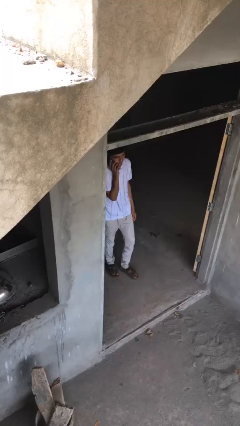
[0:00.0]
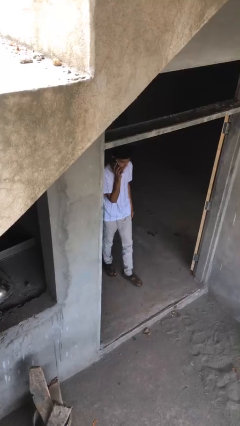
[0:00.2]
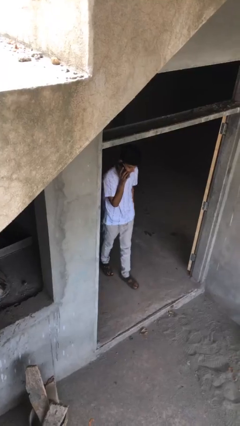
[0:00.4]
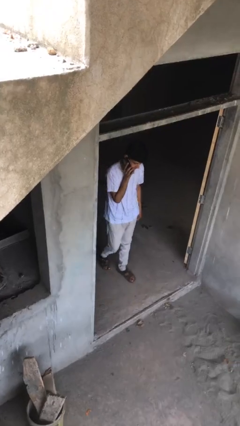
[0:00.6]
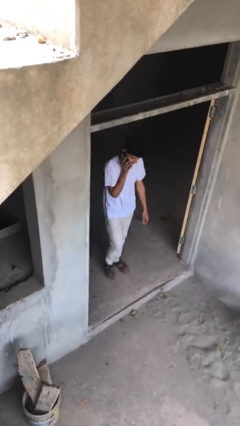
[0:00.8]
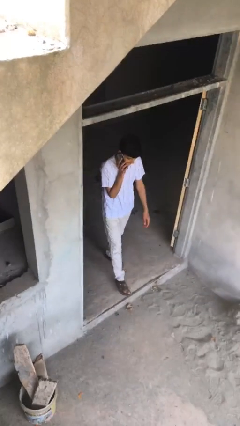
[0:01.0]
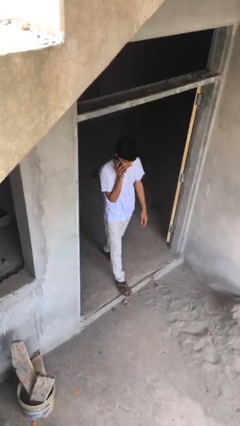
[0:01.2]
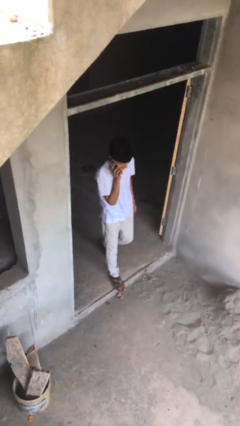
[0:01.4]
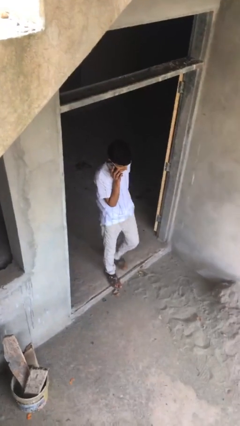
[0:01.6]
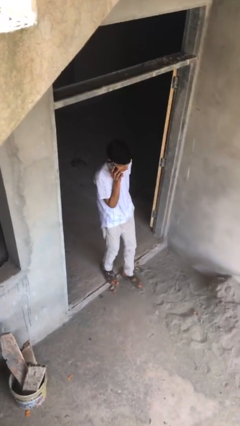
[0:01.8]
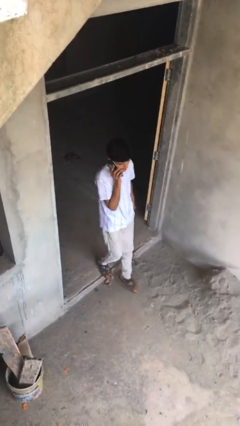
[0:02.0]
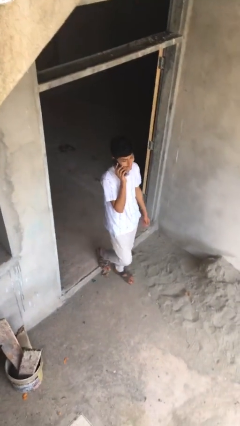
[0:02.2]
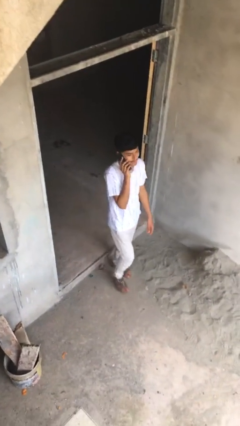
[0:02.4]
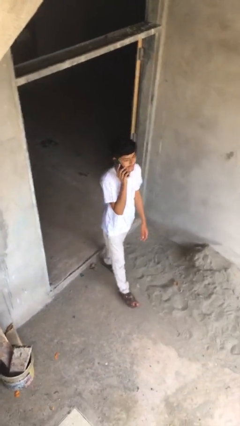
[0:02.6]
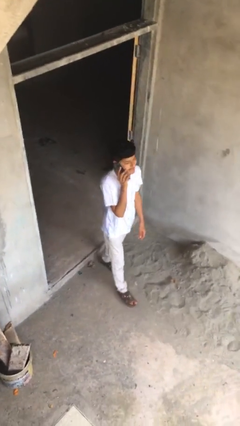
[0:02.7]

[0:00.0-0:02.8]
person enters scene through structure

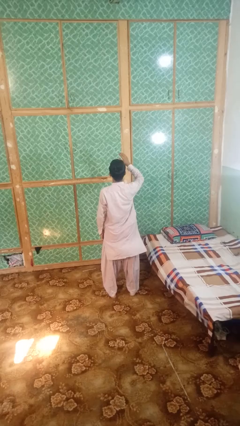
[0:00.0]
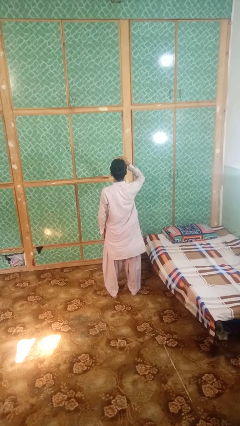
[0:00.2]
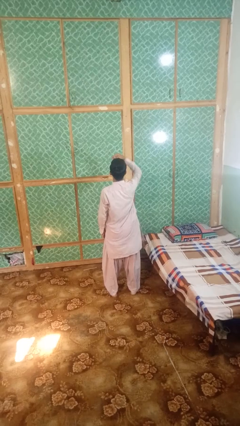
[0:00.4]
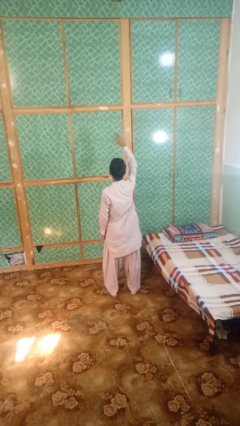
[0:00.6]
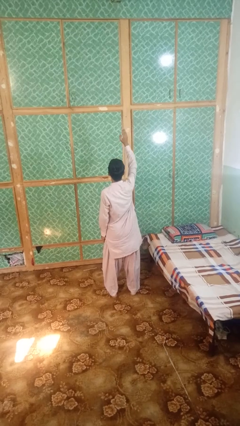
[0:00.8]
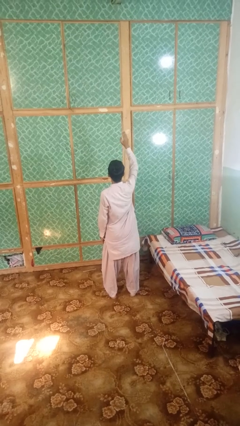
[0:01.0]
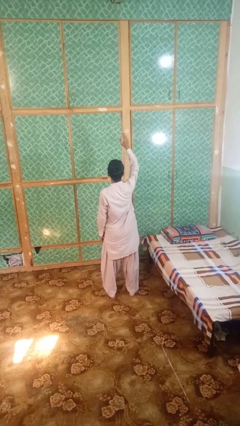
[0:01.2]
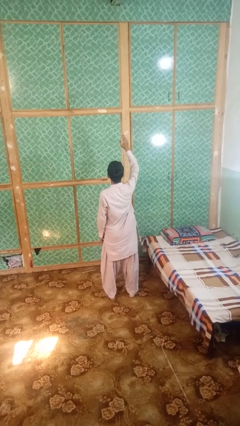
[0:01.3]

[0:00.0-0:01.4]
person gestures swipe up

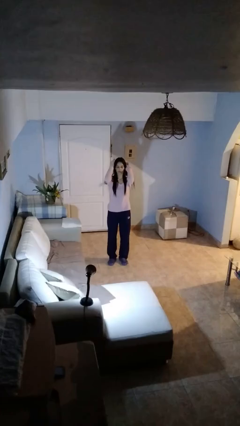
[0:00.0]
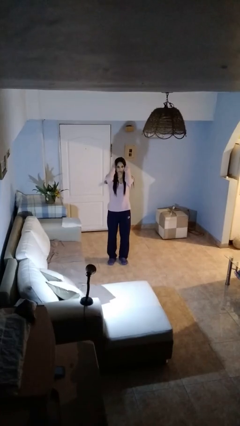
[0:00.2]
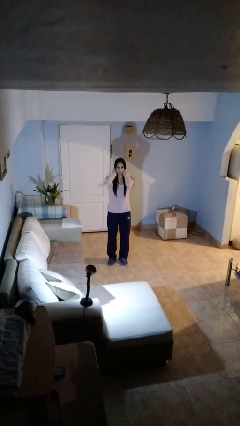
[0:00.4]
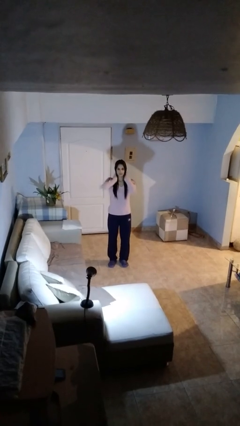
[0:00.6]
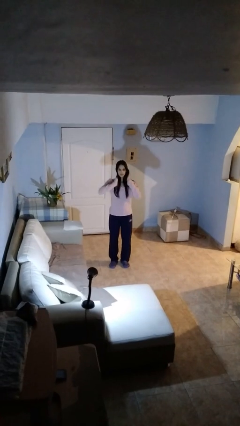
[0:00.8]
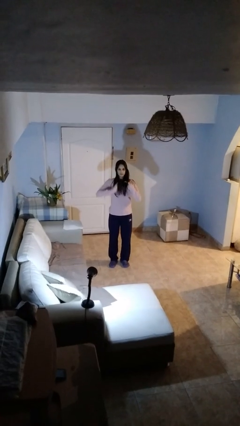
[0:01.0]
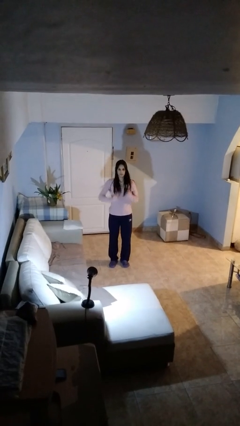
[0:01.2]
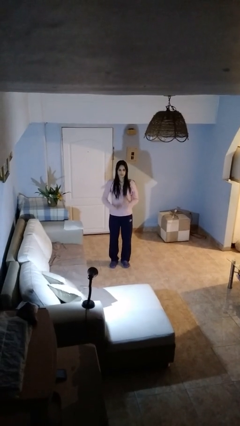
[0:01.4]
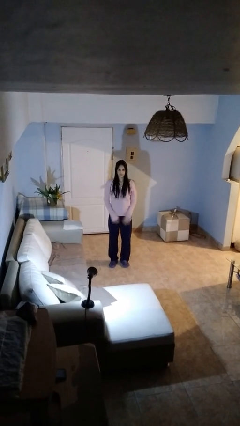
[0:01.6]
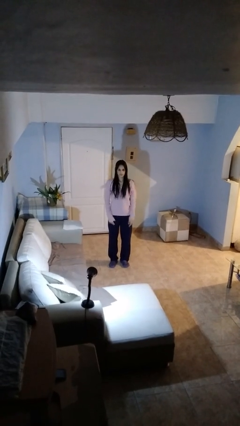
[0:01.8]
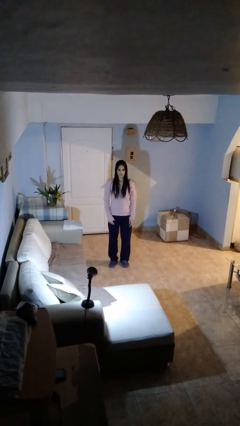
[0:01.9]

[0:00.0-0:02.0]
person strokes hair

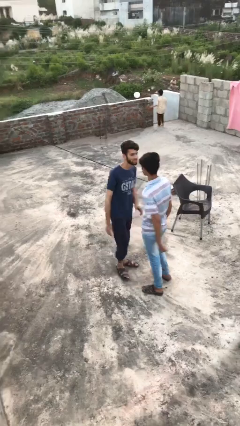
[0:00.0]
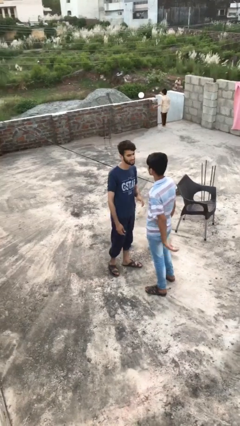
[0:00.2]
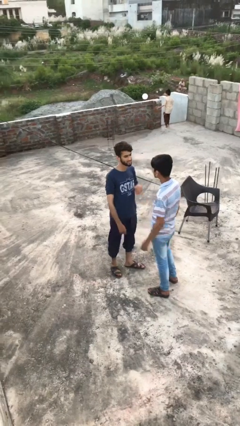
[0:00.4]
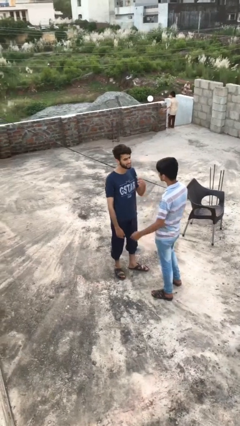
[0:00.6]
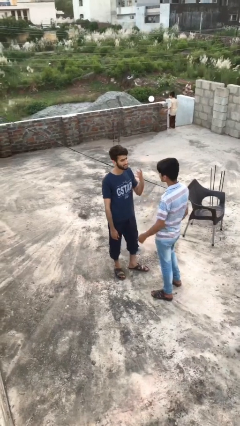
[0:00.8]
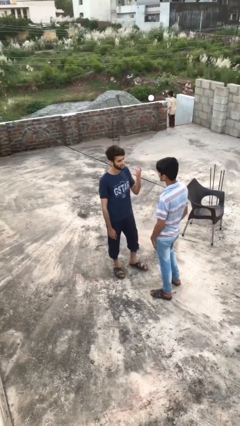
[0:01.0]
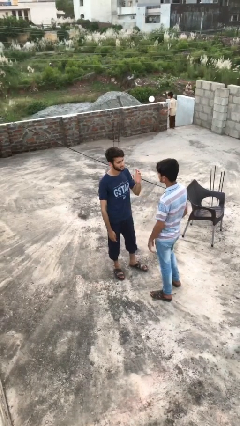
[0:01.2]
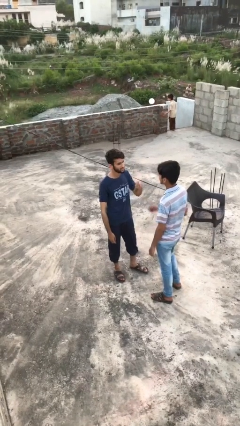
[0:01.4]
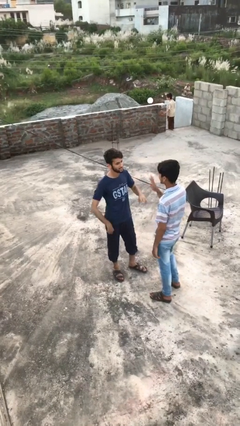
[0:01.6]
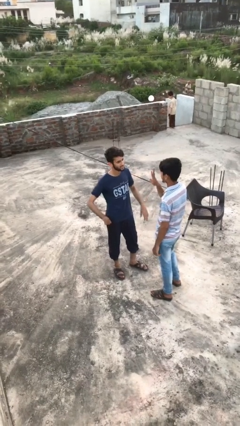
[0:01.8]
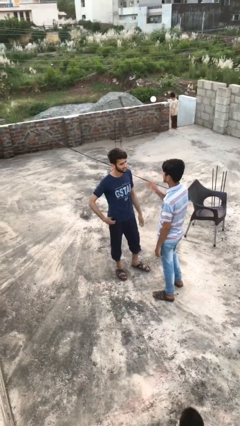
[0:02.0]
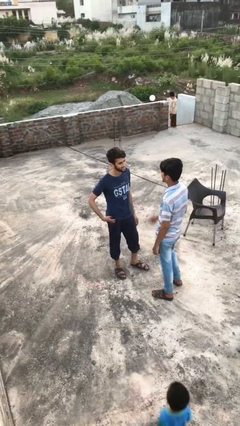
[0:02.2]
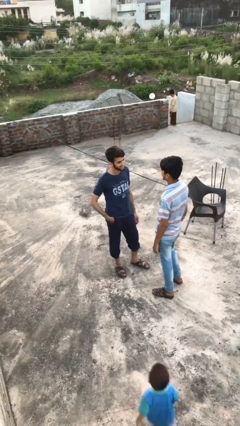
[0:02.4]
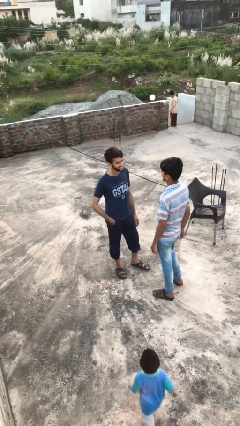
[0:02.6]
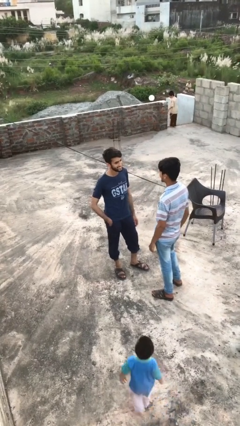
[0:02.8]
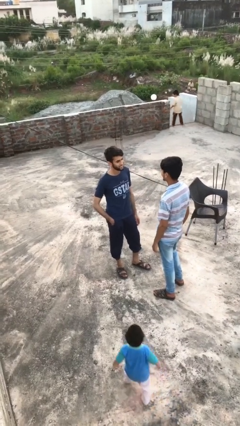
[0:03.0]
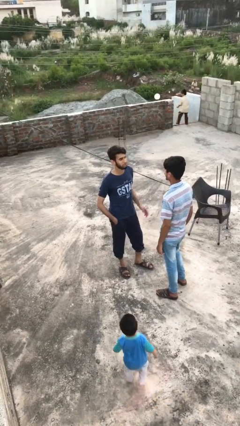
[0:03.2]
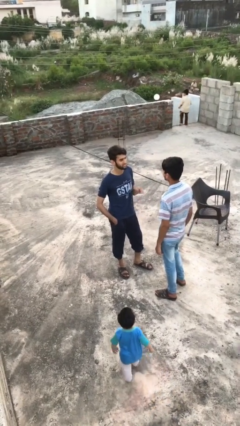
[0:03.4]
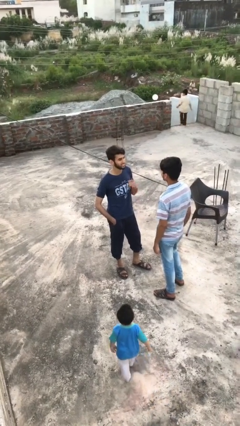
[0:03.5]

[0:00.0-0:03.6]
person talks to person

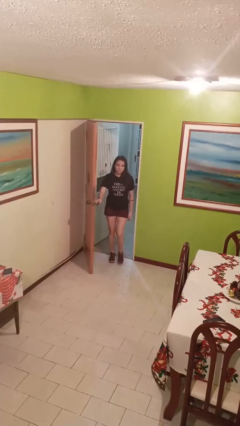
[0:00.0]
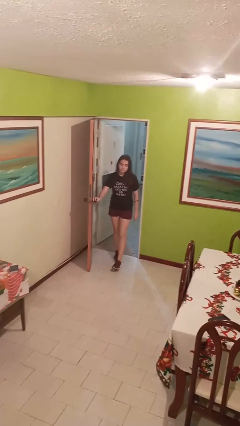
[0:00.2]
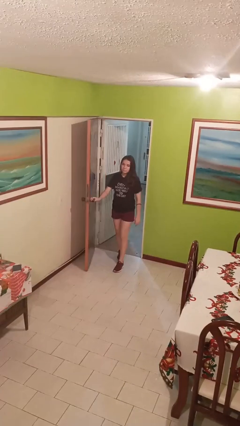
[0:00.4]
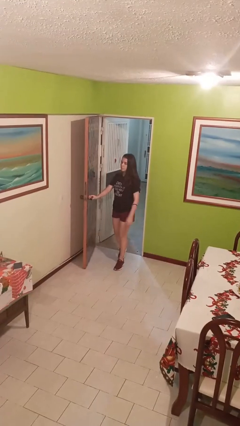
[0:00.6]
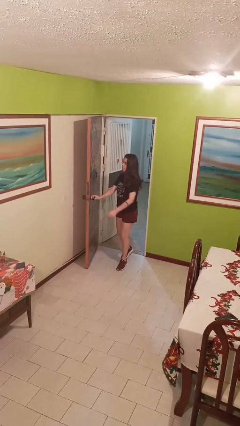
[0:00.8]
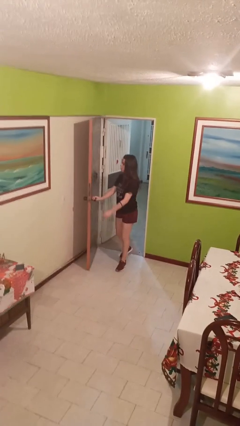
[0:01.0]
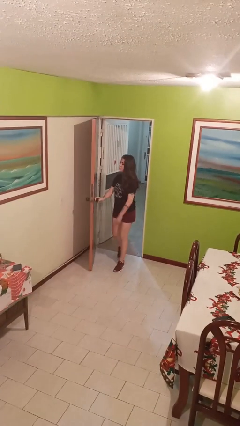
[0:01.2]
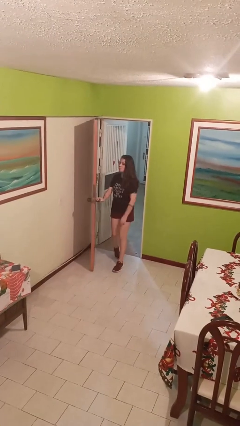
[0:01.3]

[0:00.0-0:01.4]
person opens facility door

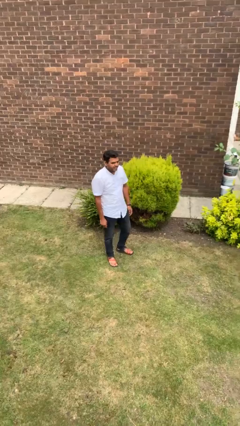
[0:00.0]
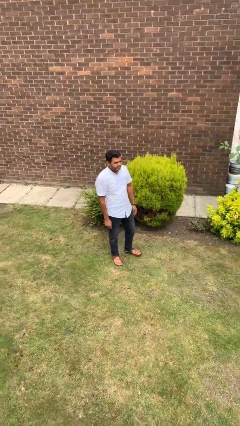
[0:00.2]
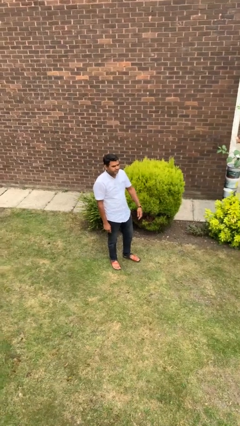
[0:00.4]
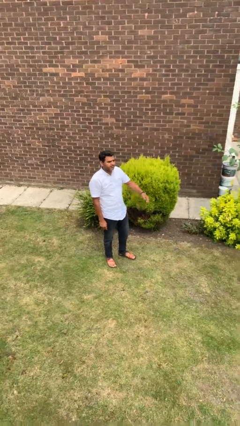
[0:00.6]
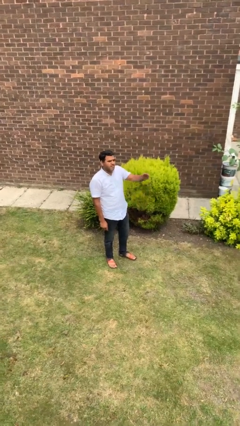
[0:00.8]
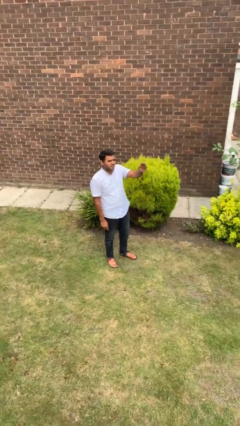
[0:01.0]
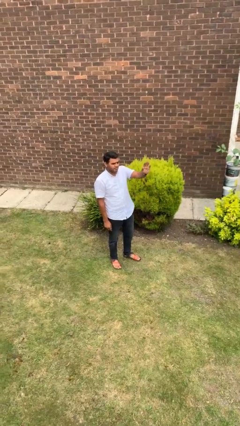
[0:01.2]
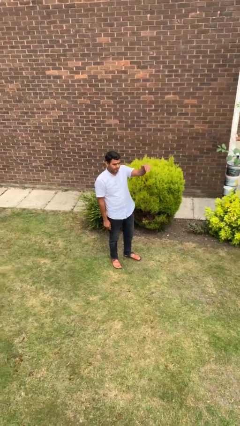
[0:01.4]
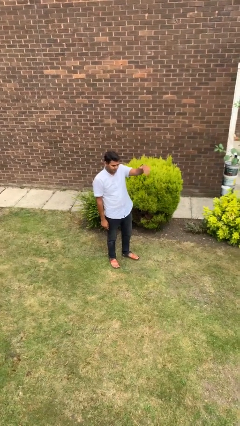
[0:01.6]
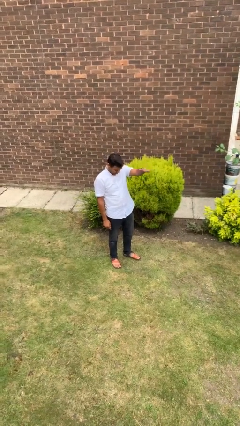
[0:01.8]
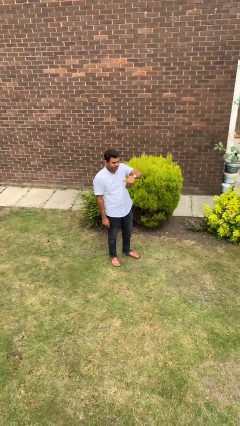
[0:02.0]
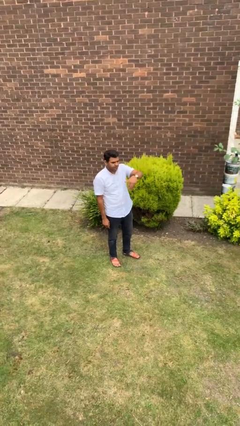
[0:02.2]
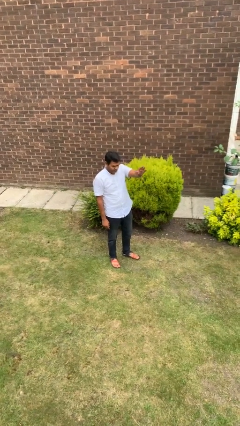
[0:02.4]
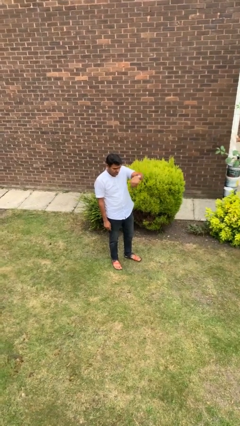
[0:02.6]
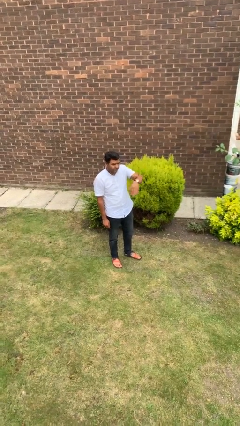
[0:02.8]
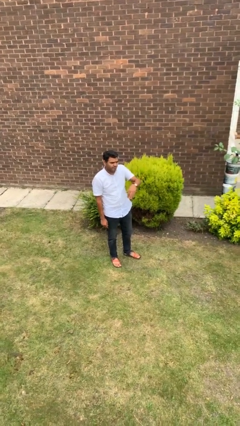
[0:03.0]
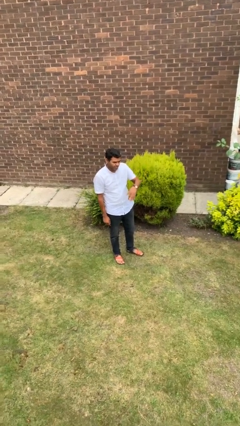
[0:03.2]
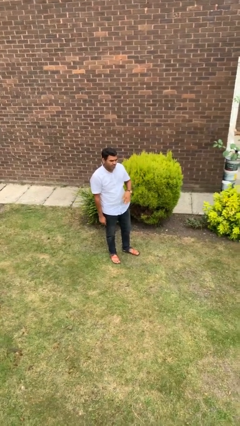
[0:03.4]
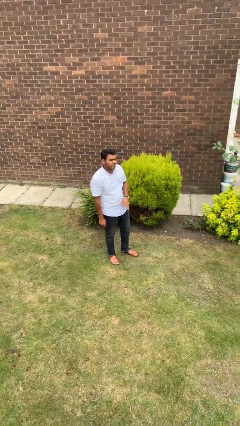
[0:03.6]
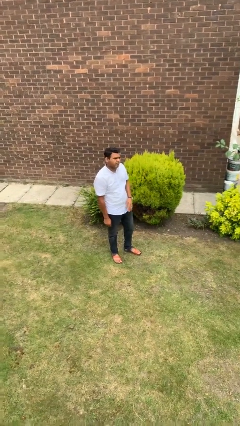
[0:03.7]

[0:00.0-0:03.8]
person gestures come here

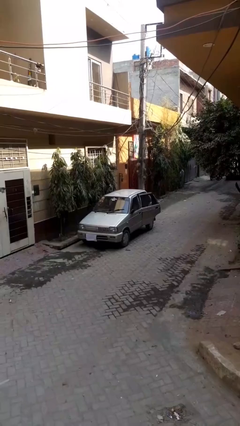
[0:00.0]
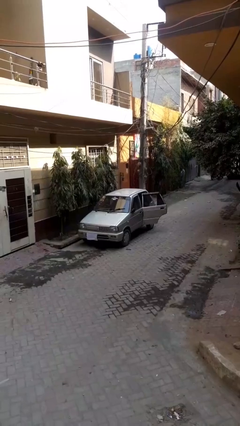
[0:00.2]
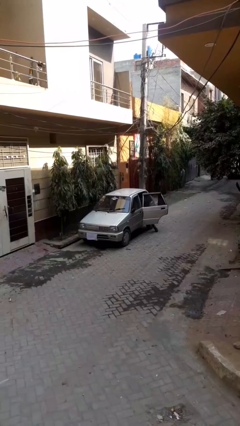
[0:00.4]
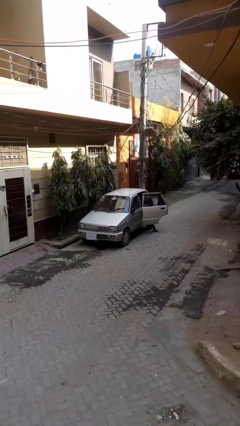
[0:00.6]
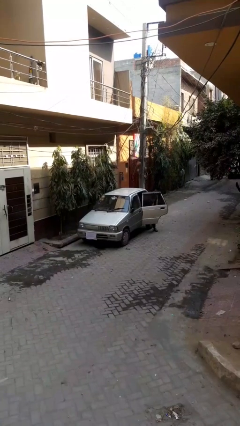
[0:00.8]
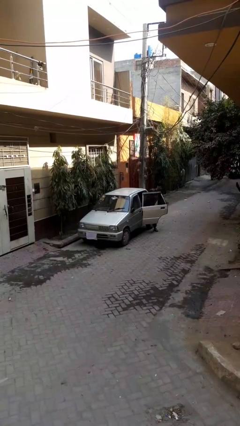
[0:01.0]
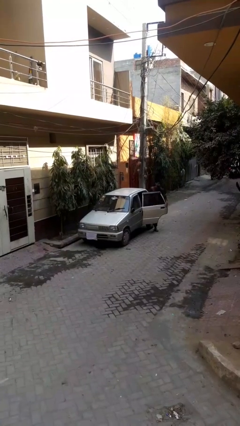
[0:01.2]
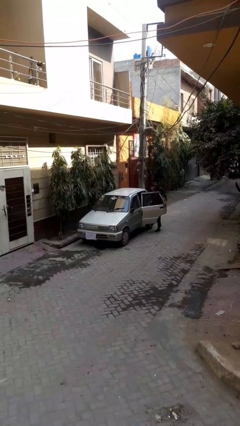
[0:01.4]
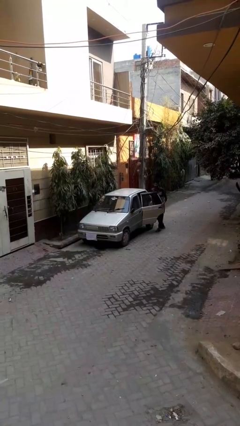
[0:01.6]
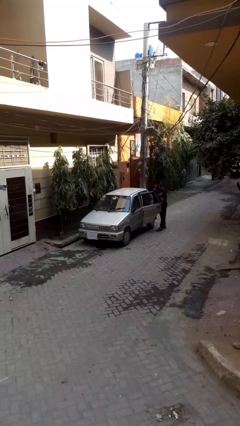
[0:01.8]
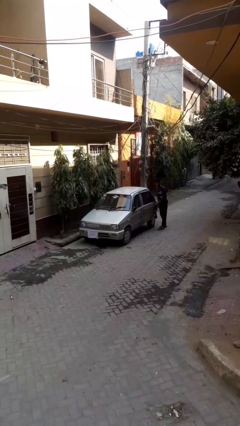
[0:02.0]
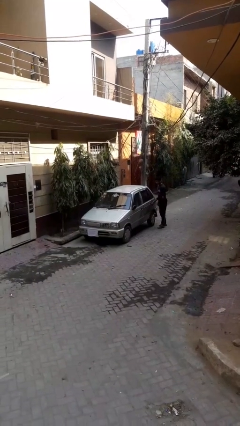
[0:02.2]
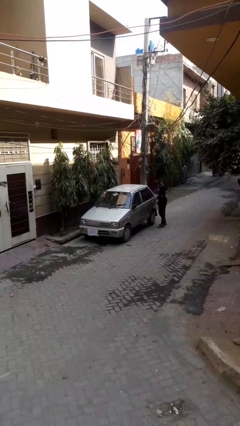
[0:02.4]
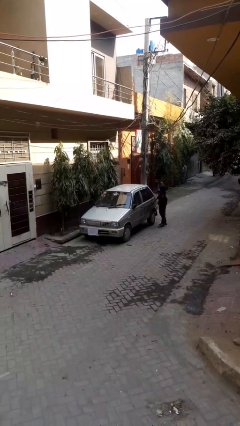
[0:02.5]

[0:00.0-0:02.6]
car drops off person
